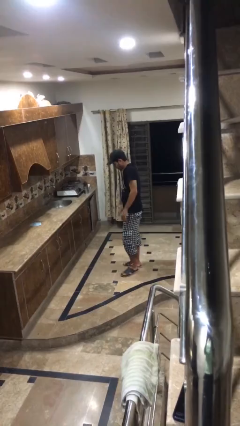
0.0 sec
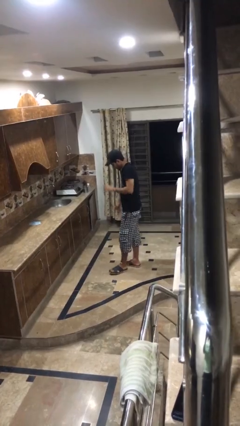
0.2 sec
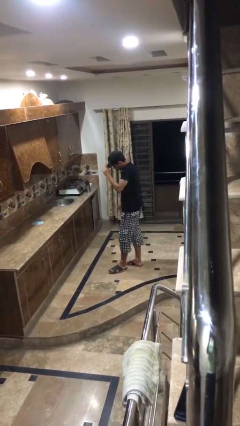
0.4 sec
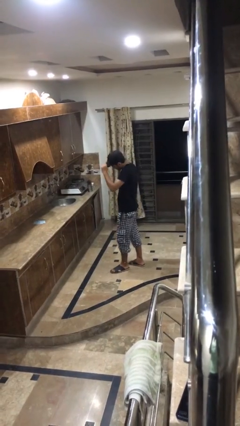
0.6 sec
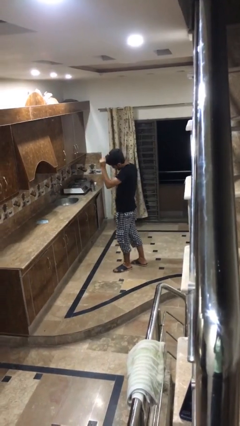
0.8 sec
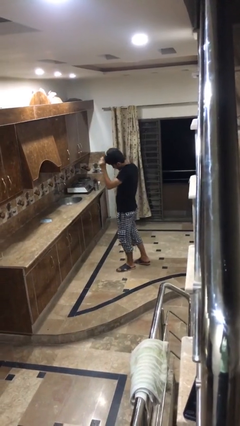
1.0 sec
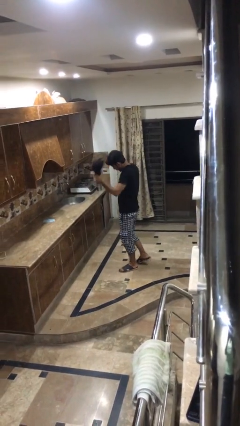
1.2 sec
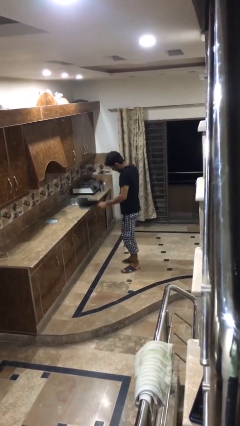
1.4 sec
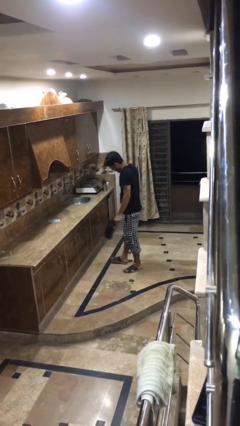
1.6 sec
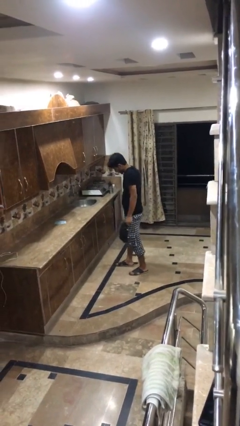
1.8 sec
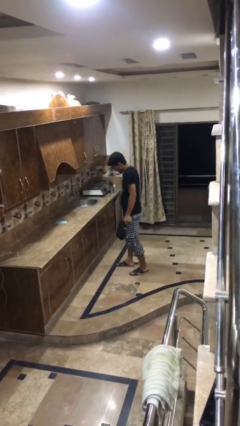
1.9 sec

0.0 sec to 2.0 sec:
person takes off hat

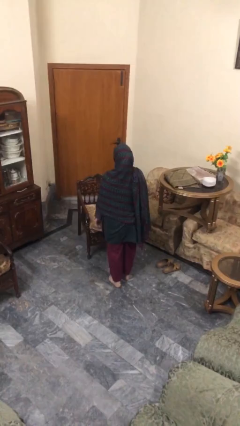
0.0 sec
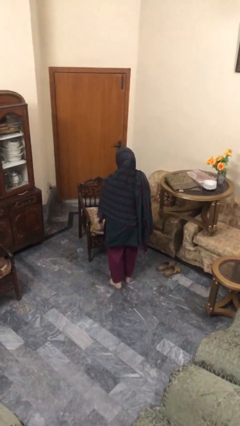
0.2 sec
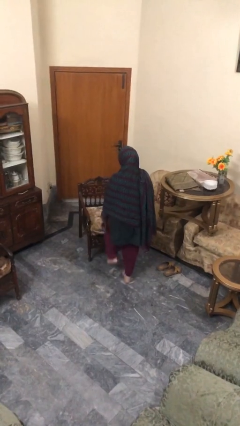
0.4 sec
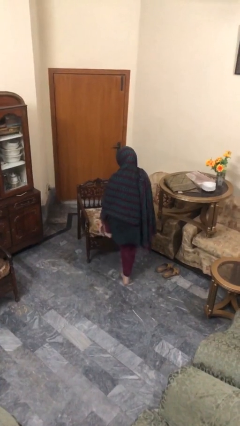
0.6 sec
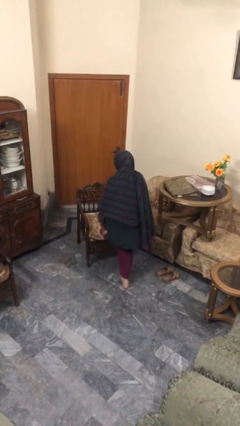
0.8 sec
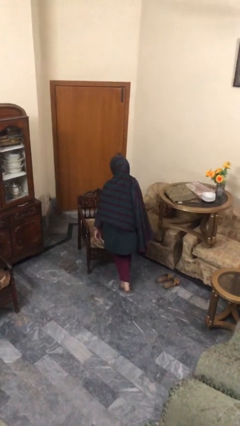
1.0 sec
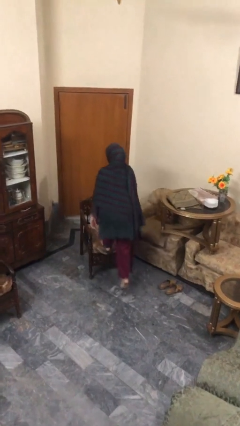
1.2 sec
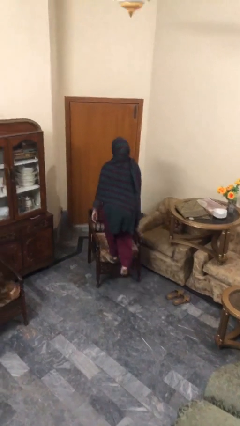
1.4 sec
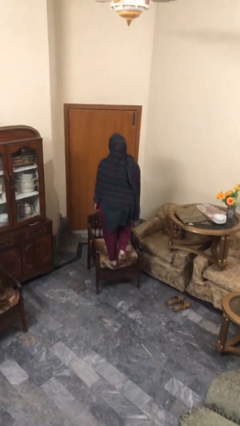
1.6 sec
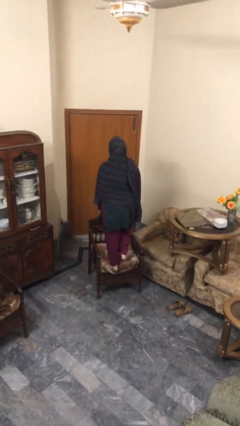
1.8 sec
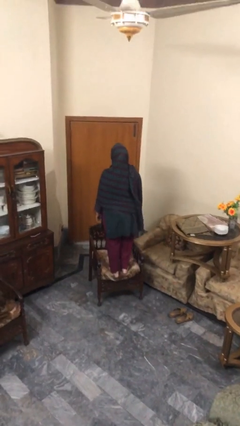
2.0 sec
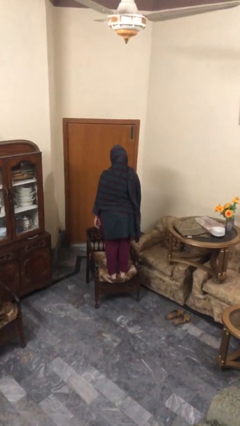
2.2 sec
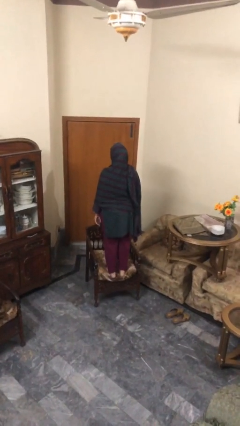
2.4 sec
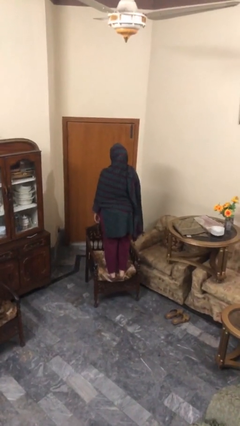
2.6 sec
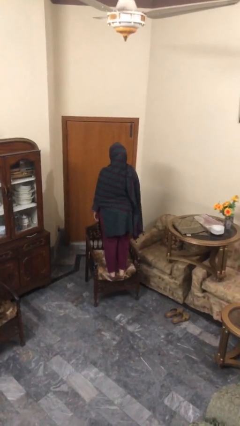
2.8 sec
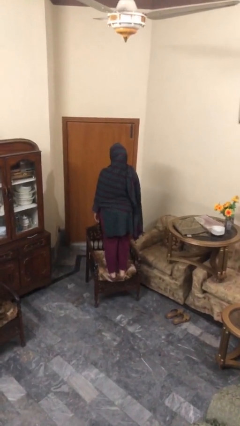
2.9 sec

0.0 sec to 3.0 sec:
person climbs on chair

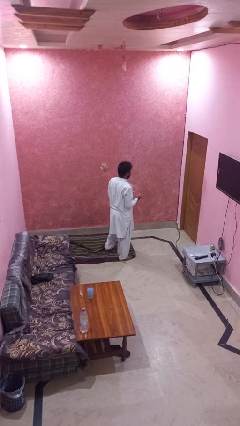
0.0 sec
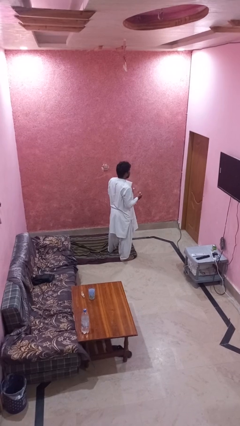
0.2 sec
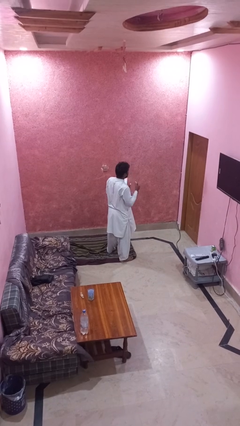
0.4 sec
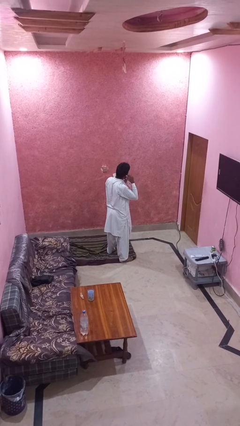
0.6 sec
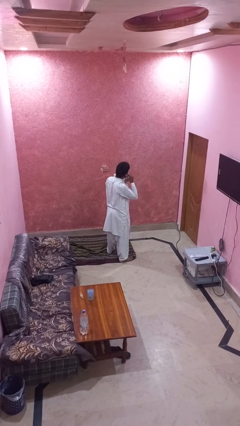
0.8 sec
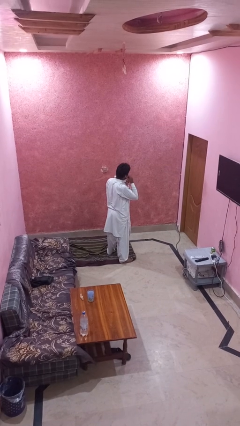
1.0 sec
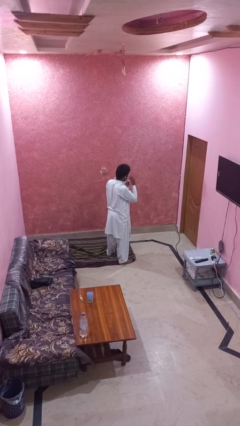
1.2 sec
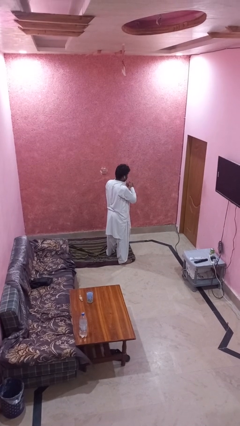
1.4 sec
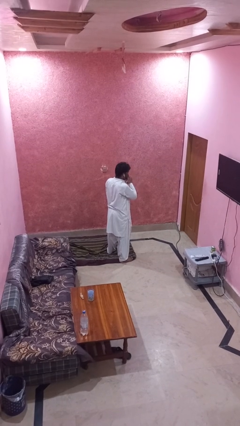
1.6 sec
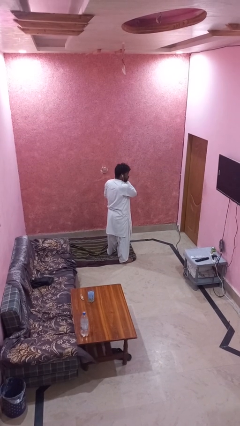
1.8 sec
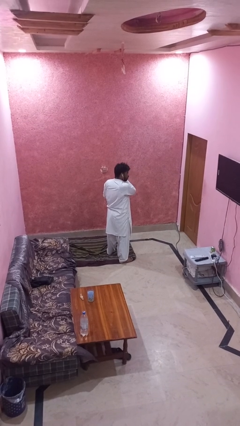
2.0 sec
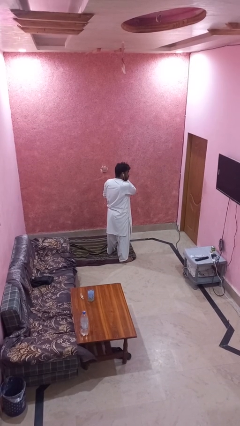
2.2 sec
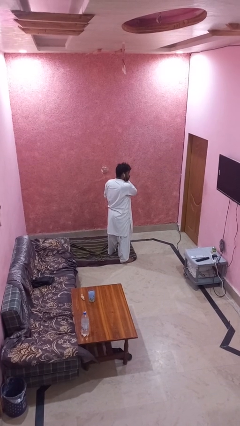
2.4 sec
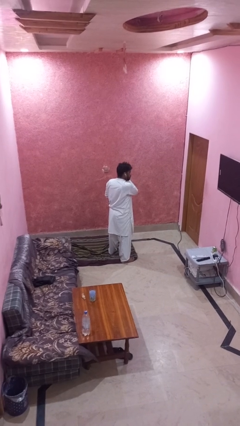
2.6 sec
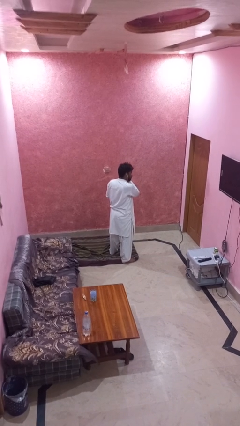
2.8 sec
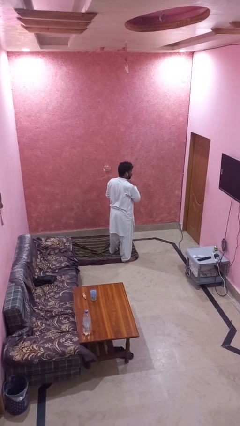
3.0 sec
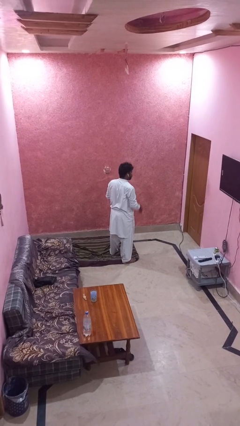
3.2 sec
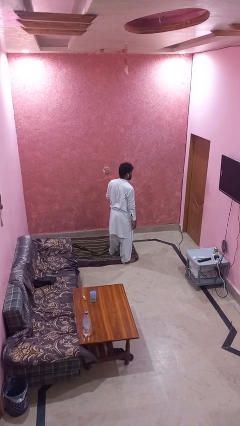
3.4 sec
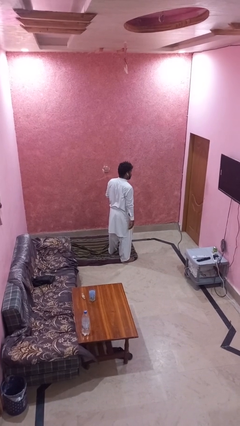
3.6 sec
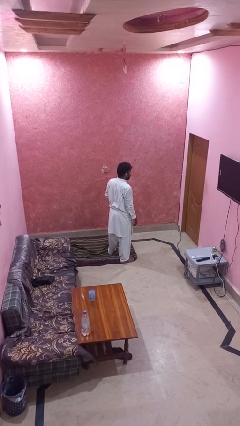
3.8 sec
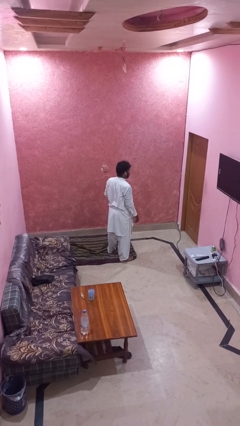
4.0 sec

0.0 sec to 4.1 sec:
person puts on headphones

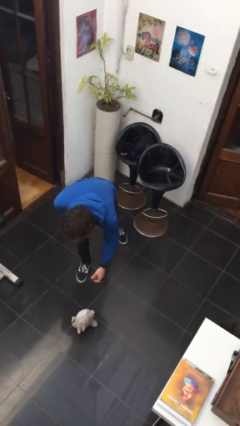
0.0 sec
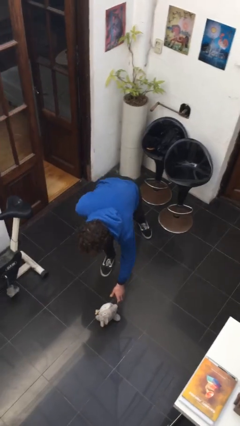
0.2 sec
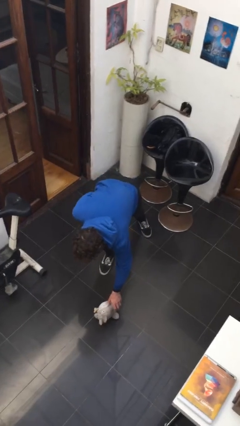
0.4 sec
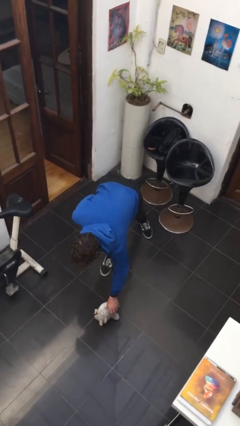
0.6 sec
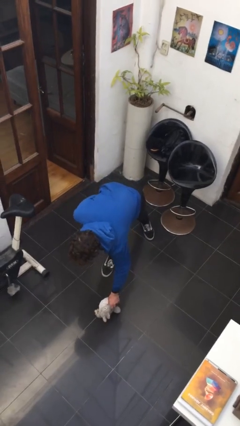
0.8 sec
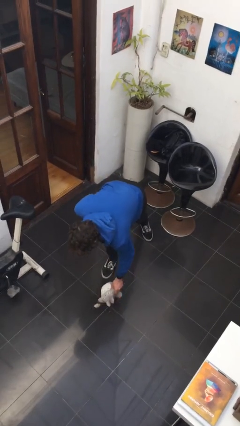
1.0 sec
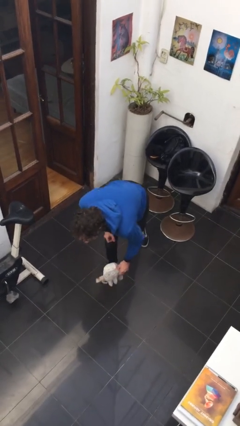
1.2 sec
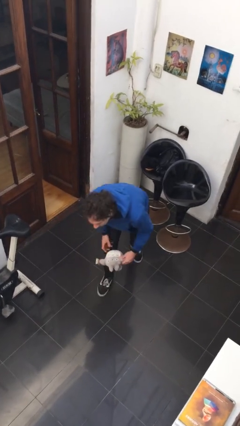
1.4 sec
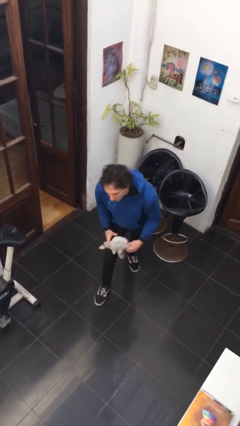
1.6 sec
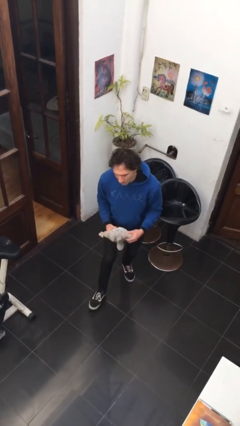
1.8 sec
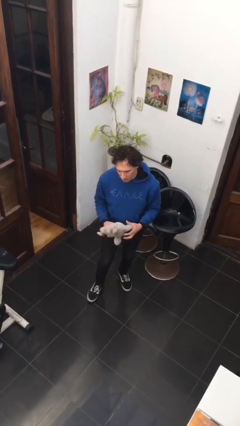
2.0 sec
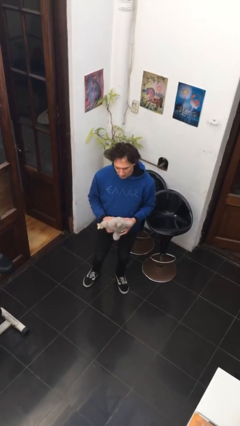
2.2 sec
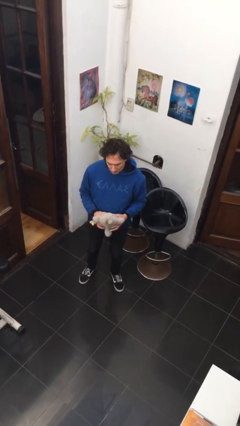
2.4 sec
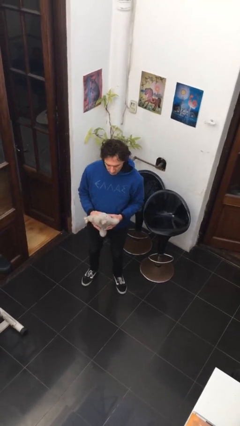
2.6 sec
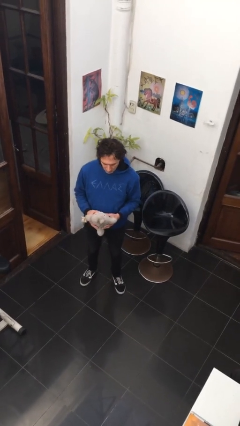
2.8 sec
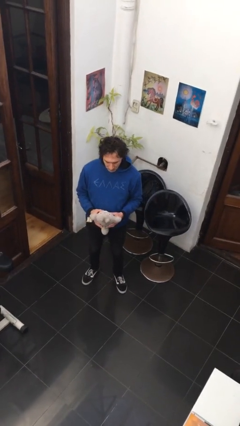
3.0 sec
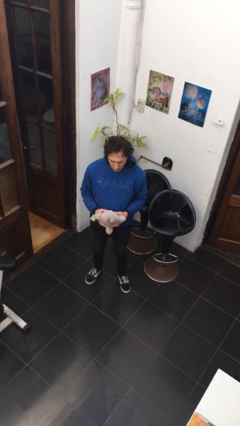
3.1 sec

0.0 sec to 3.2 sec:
person picks up object from floor

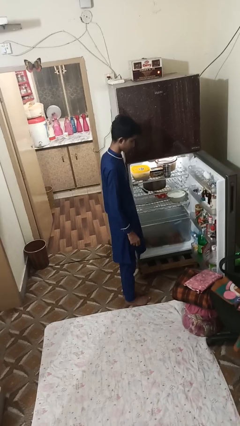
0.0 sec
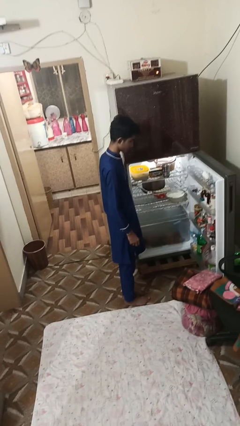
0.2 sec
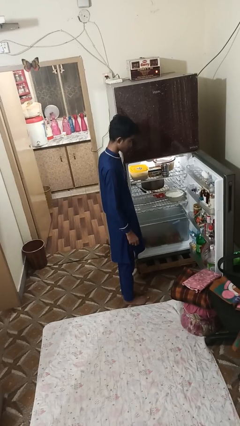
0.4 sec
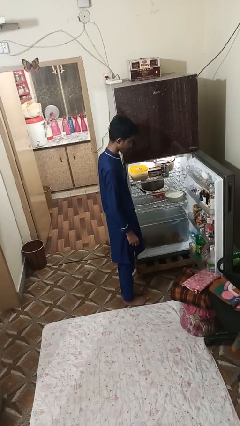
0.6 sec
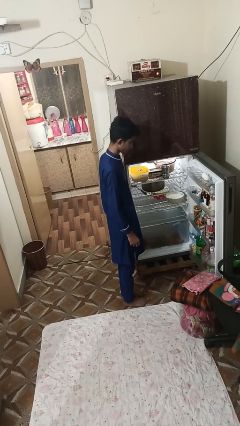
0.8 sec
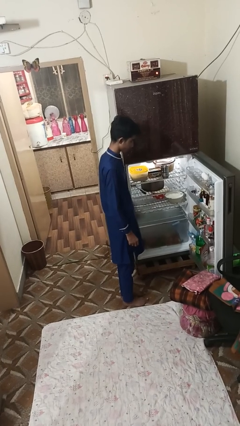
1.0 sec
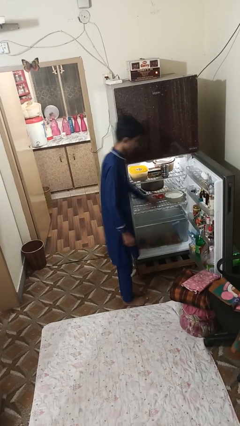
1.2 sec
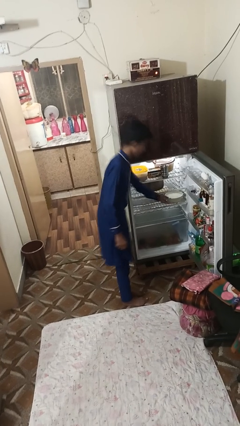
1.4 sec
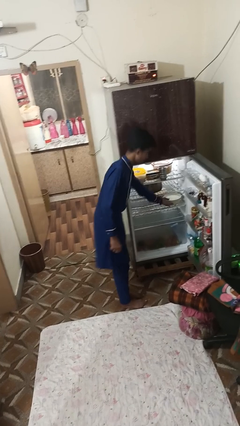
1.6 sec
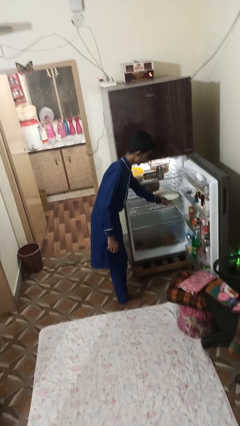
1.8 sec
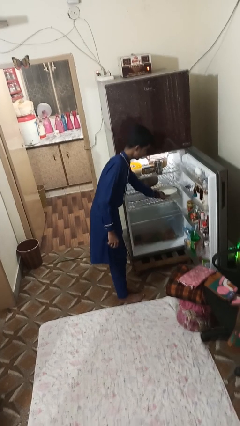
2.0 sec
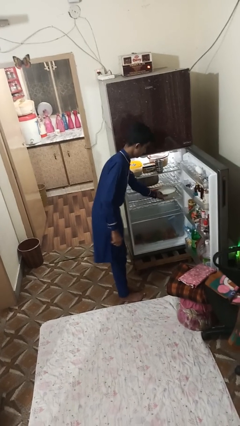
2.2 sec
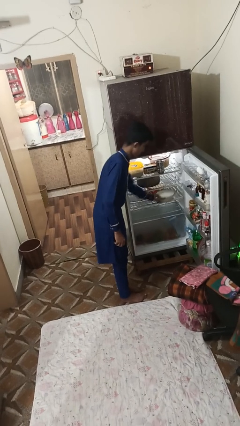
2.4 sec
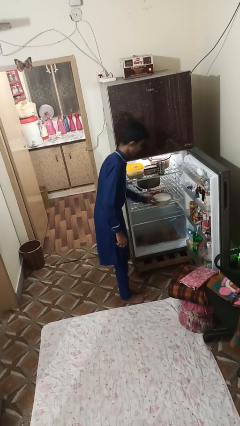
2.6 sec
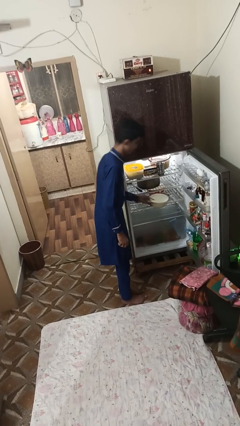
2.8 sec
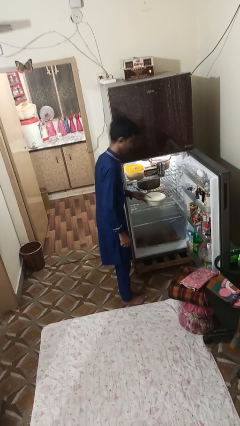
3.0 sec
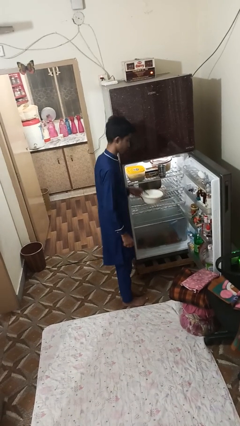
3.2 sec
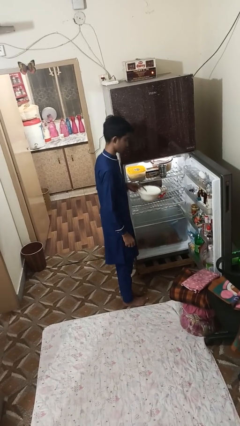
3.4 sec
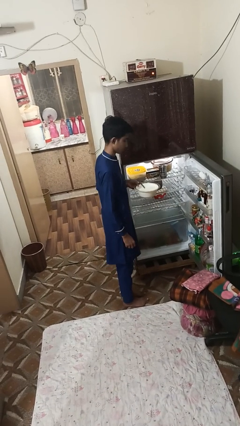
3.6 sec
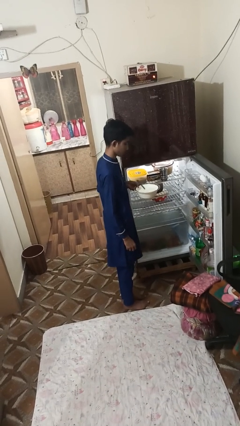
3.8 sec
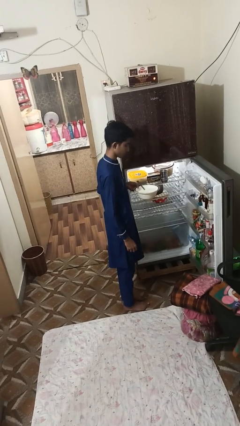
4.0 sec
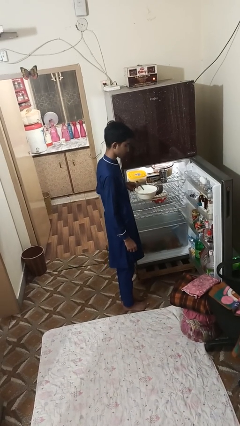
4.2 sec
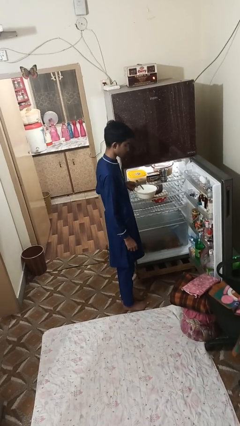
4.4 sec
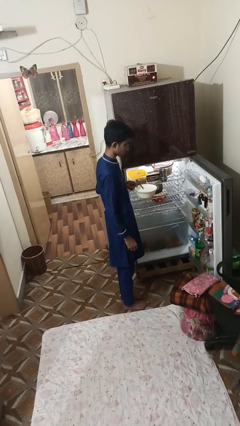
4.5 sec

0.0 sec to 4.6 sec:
person takes object from refrigerator

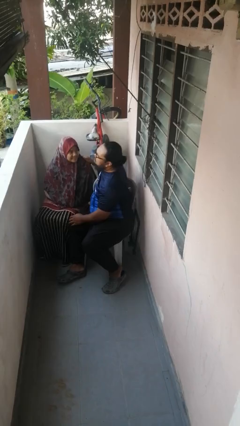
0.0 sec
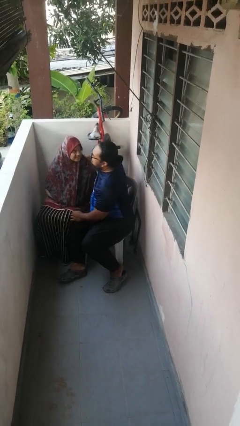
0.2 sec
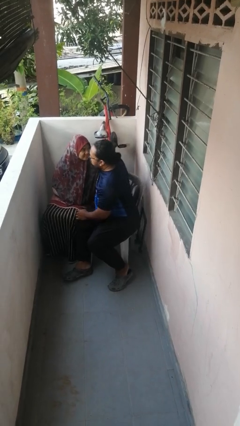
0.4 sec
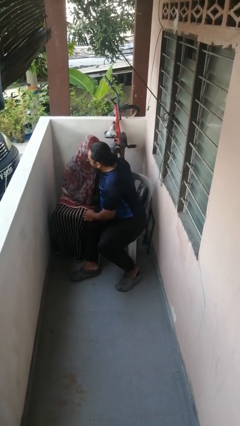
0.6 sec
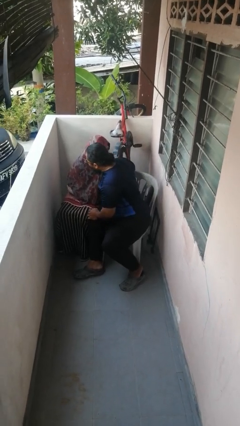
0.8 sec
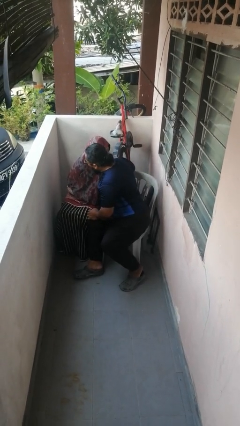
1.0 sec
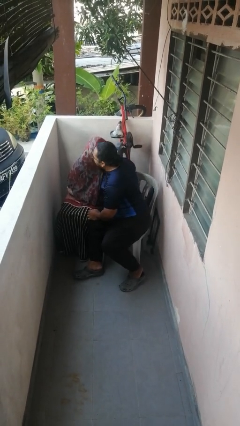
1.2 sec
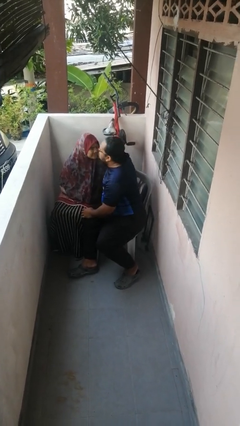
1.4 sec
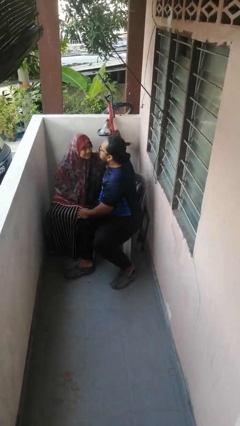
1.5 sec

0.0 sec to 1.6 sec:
person kisses cheek of person
